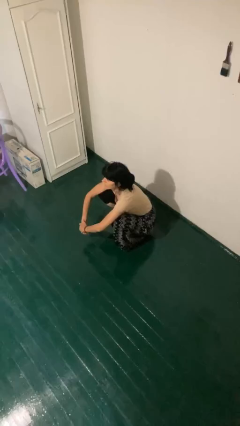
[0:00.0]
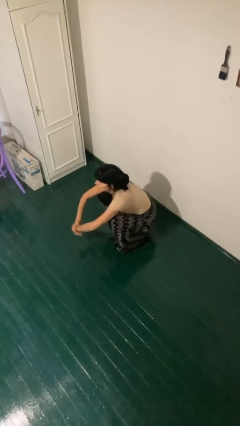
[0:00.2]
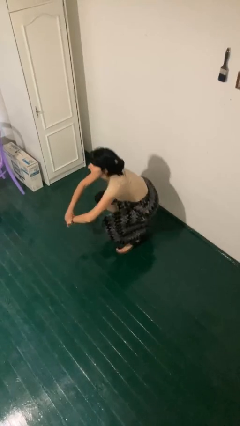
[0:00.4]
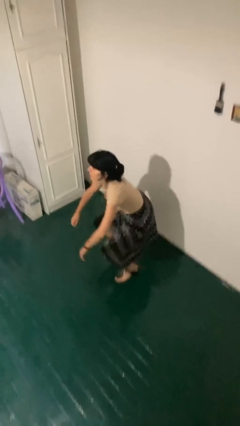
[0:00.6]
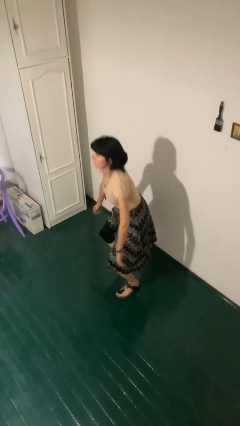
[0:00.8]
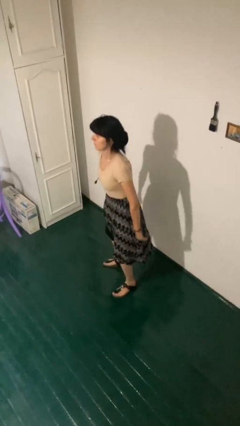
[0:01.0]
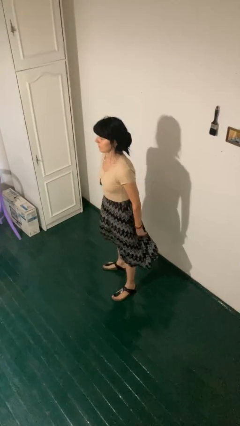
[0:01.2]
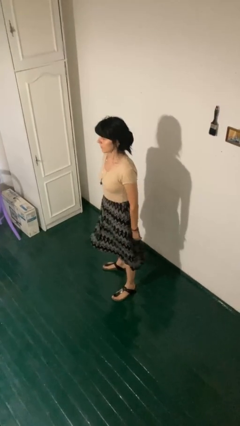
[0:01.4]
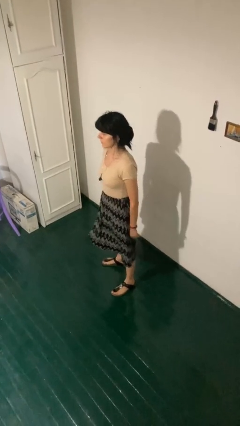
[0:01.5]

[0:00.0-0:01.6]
person stands up

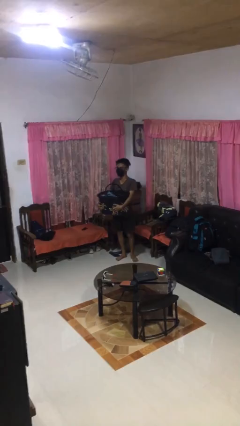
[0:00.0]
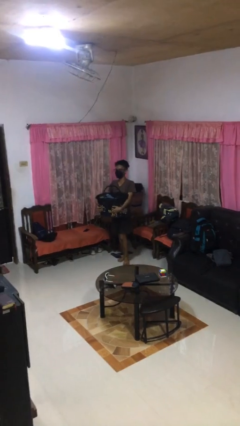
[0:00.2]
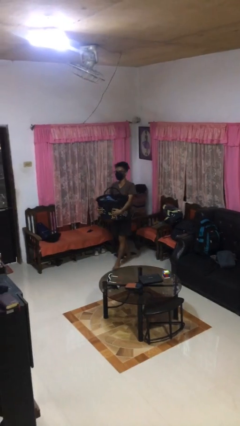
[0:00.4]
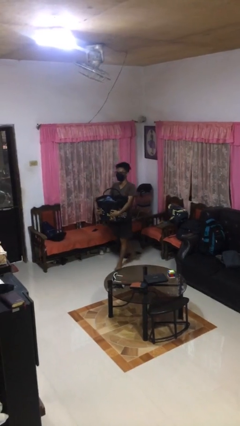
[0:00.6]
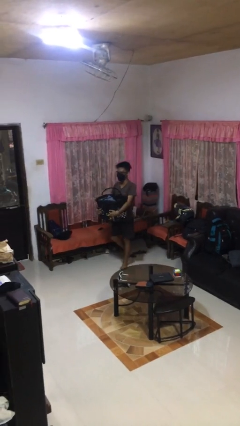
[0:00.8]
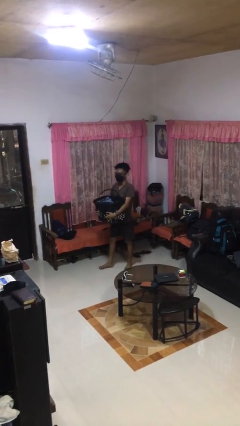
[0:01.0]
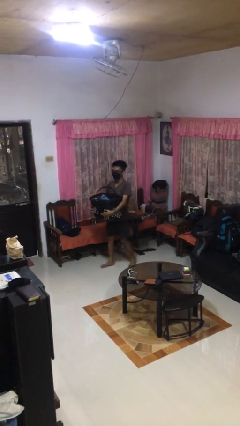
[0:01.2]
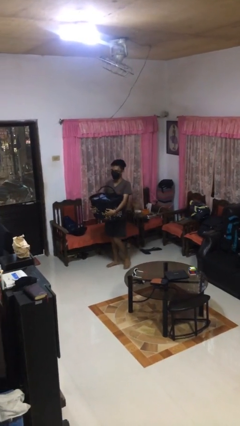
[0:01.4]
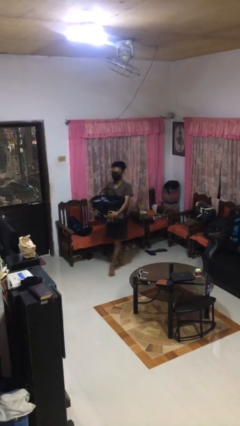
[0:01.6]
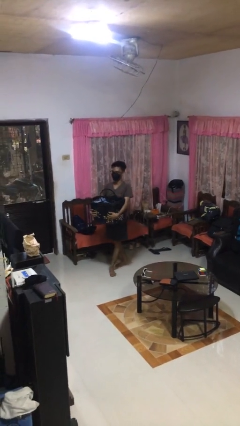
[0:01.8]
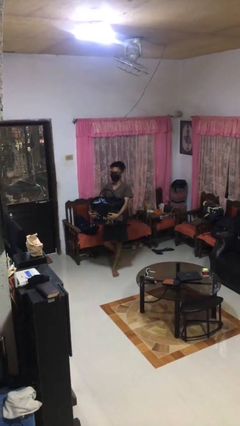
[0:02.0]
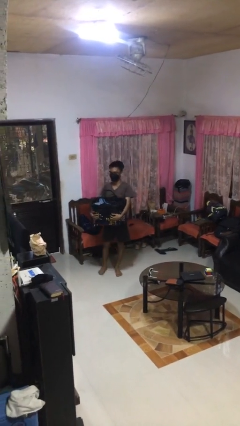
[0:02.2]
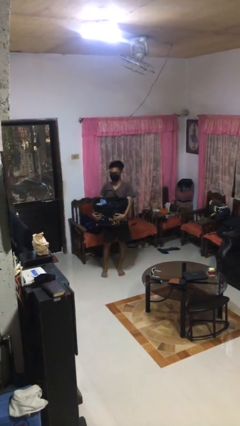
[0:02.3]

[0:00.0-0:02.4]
person carries laundry basket

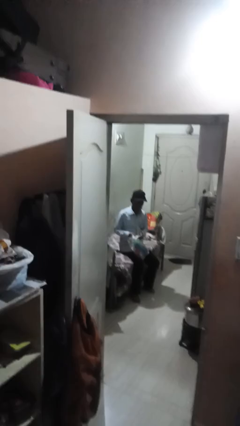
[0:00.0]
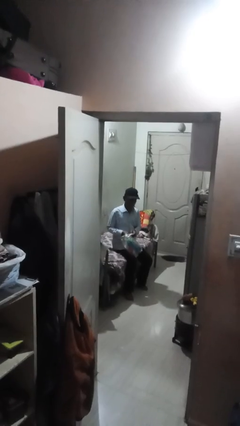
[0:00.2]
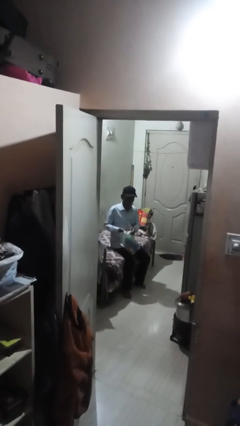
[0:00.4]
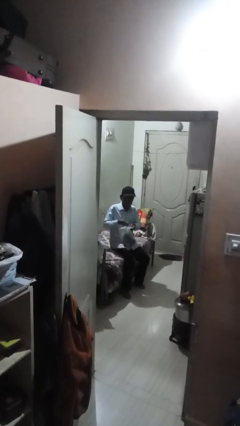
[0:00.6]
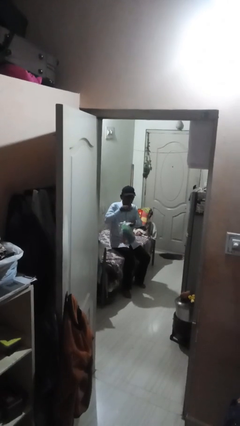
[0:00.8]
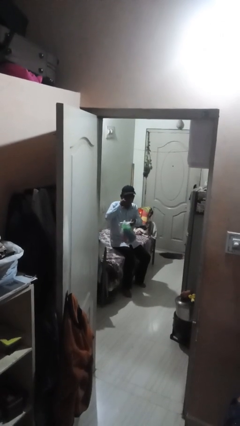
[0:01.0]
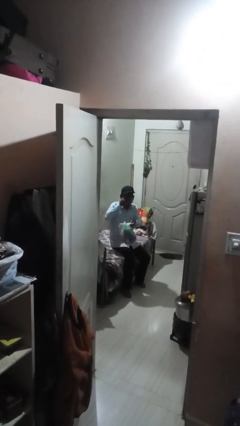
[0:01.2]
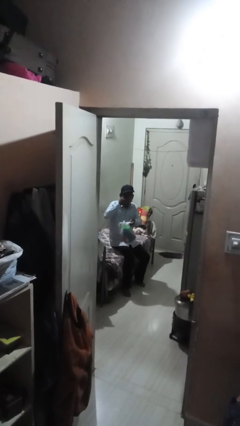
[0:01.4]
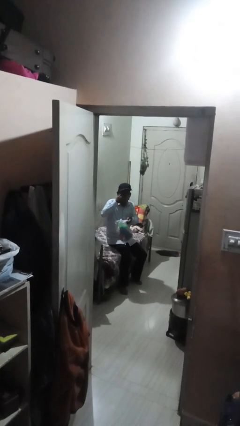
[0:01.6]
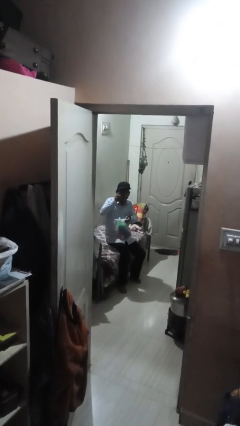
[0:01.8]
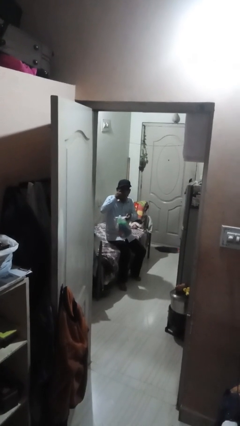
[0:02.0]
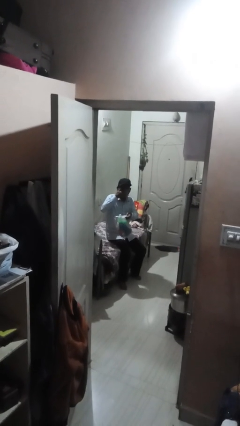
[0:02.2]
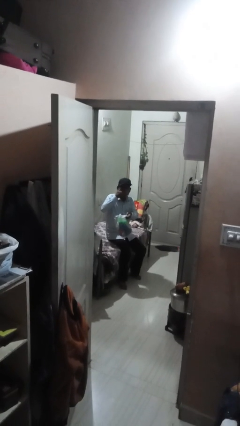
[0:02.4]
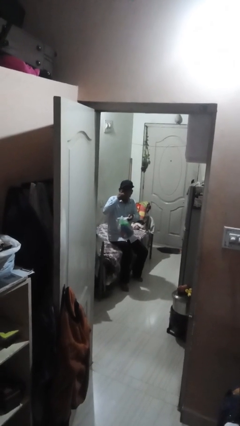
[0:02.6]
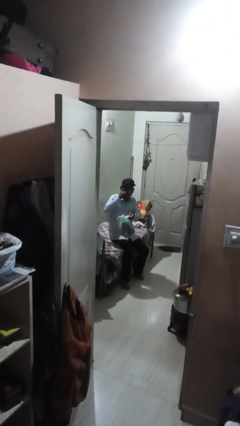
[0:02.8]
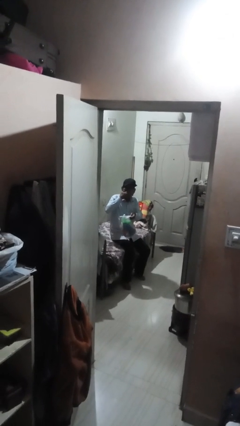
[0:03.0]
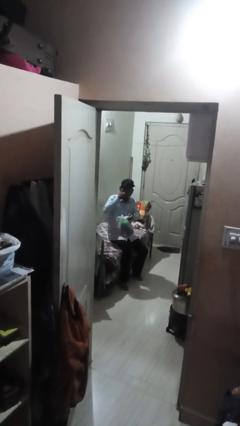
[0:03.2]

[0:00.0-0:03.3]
person eats snack from bag

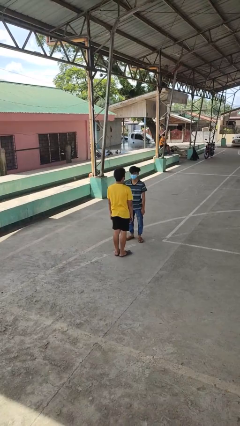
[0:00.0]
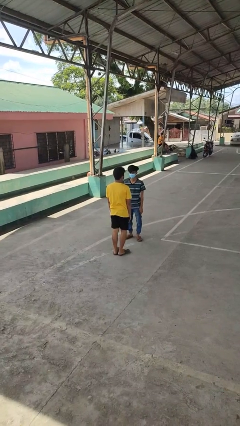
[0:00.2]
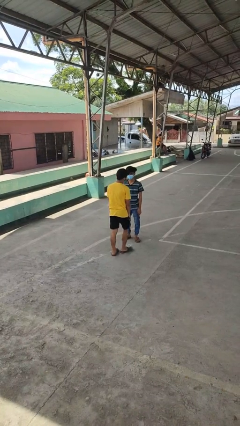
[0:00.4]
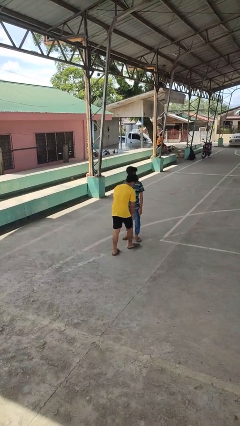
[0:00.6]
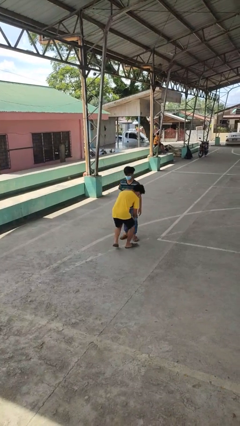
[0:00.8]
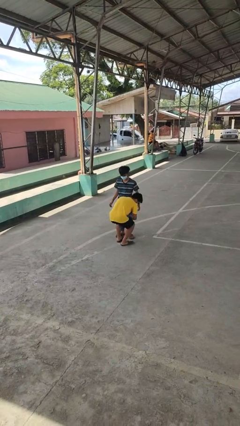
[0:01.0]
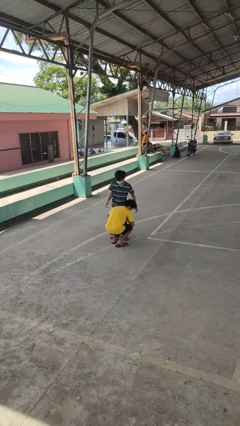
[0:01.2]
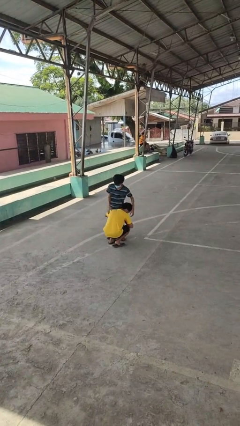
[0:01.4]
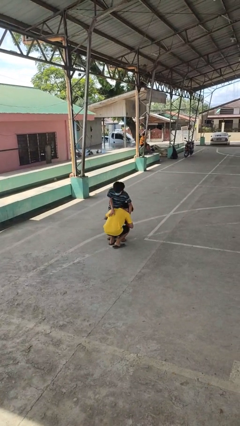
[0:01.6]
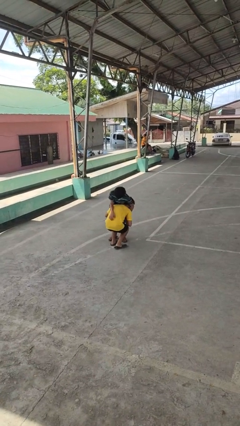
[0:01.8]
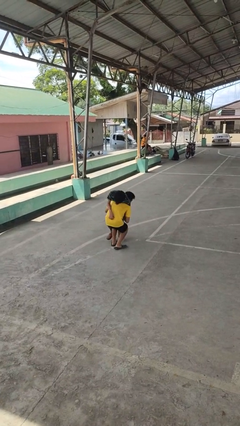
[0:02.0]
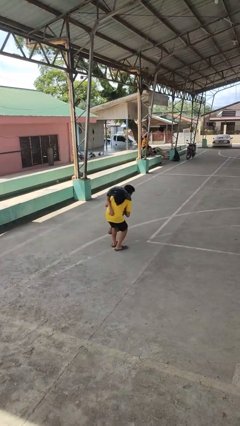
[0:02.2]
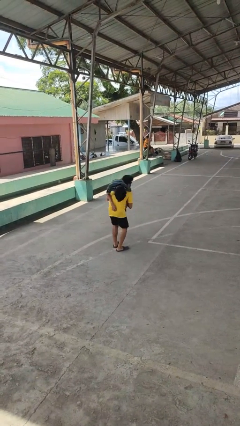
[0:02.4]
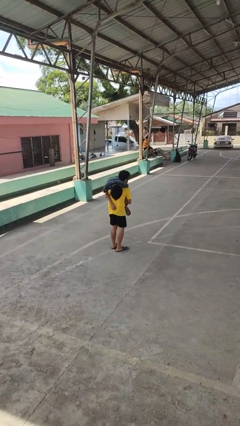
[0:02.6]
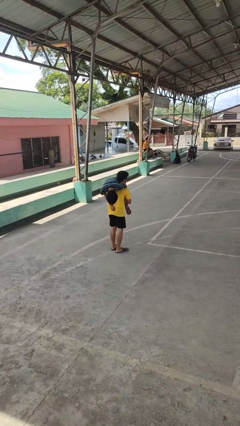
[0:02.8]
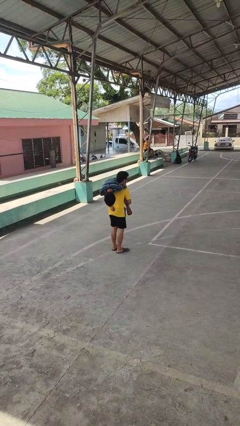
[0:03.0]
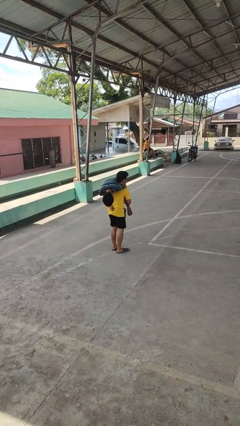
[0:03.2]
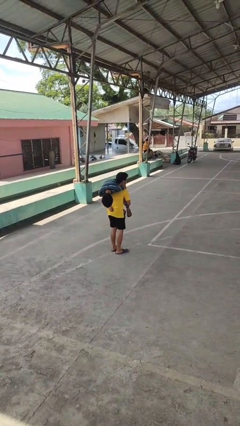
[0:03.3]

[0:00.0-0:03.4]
person carries person over shoulder

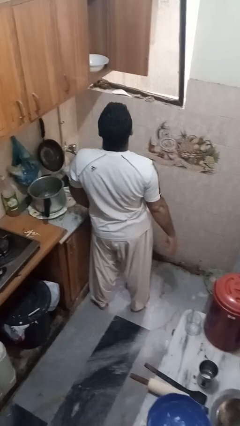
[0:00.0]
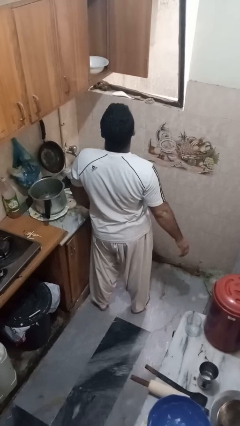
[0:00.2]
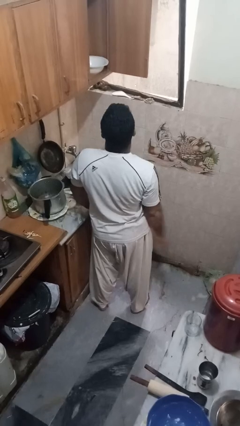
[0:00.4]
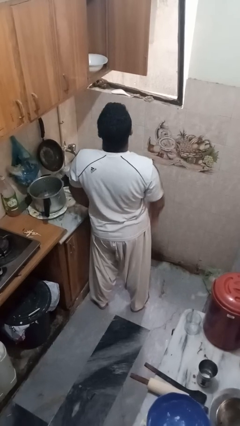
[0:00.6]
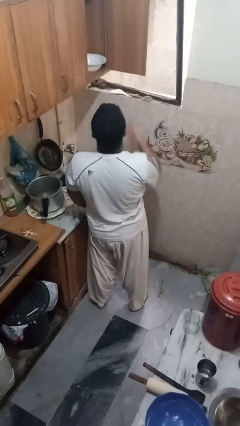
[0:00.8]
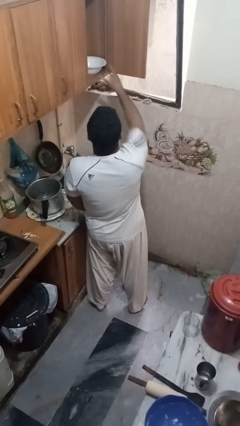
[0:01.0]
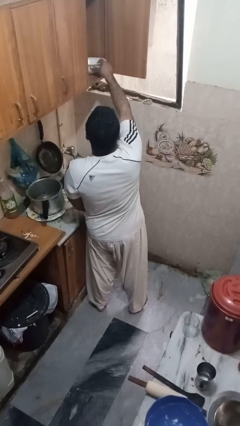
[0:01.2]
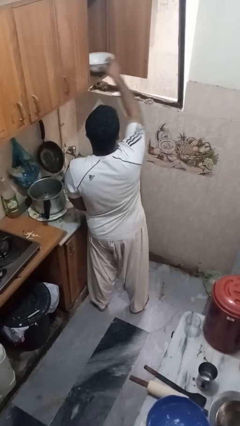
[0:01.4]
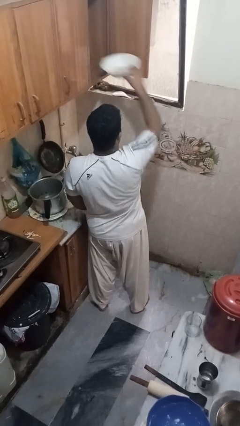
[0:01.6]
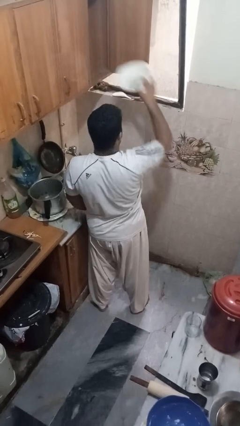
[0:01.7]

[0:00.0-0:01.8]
person takes object from cabinet

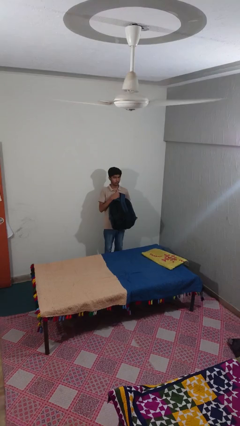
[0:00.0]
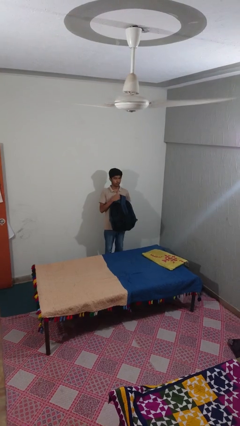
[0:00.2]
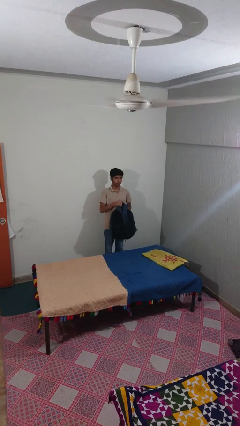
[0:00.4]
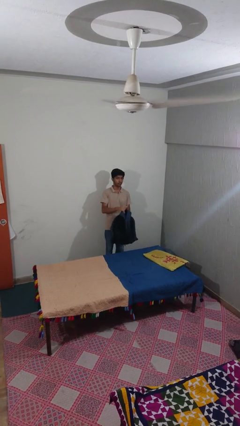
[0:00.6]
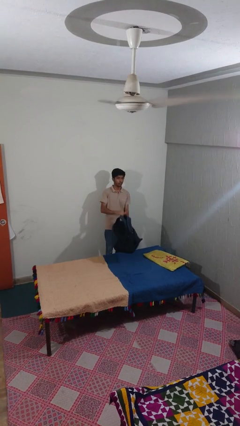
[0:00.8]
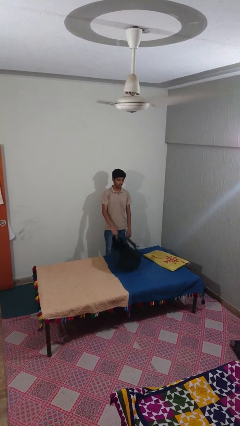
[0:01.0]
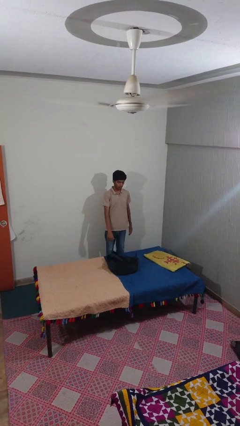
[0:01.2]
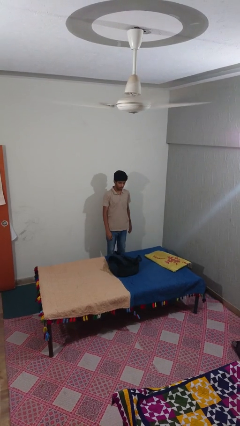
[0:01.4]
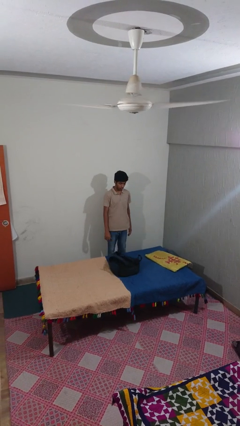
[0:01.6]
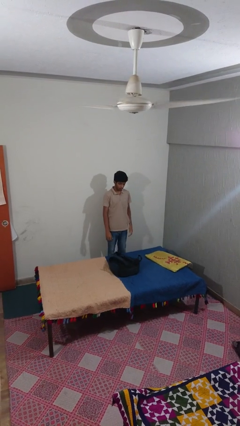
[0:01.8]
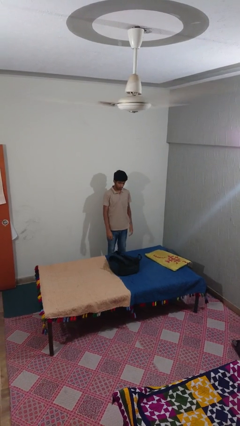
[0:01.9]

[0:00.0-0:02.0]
person puts down object on bed

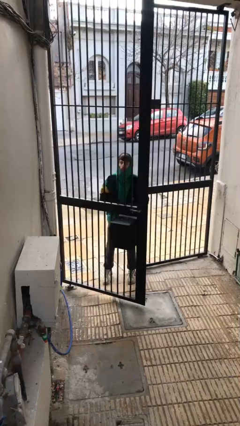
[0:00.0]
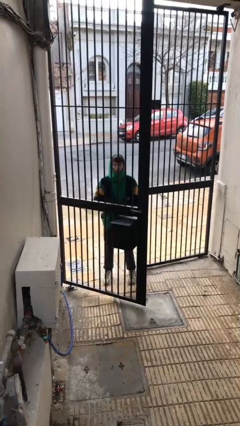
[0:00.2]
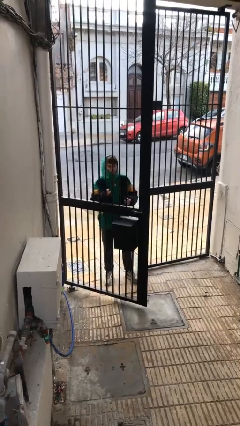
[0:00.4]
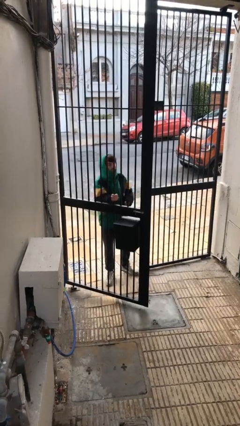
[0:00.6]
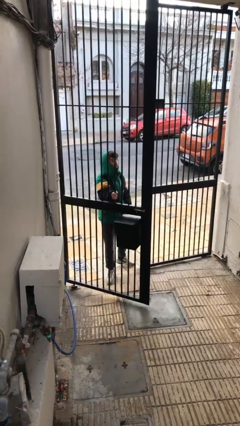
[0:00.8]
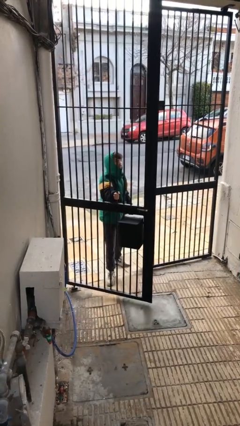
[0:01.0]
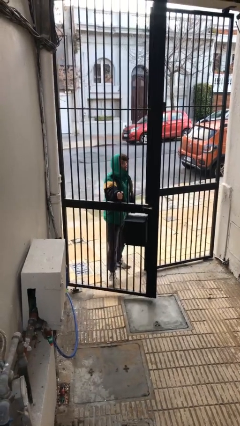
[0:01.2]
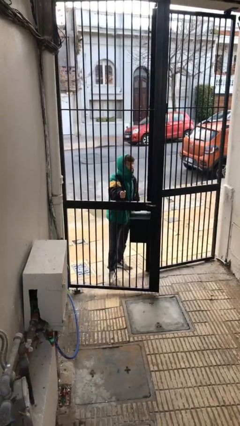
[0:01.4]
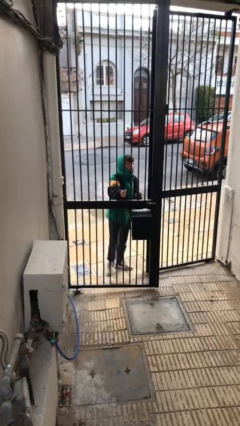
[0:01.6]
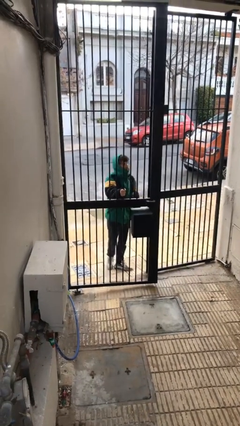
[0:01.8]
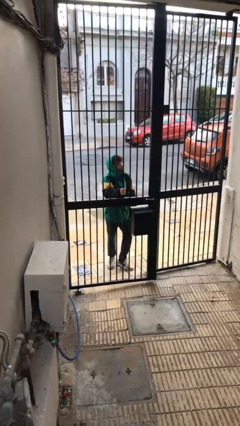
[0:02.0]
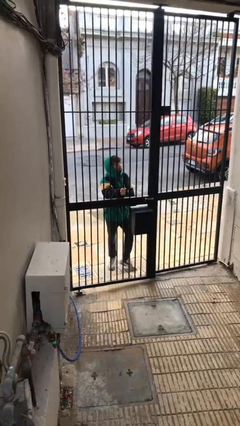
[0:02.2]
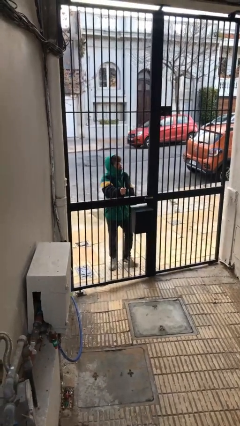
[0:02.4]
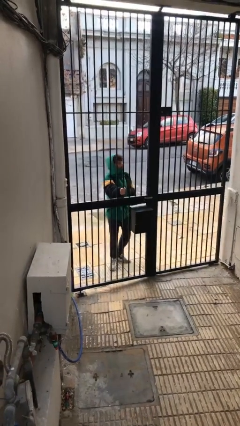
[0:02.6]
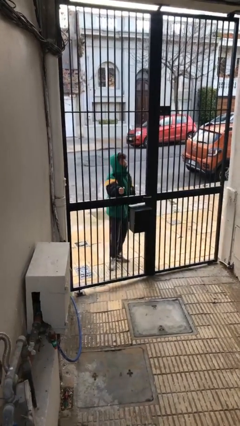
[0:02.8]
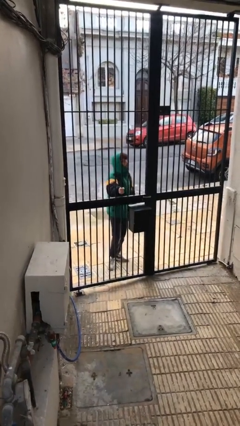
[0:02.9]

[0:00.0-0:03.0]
person closes gate
